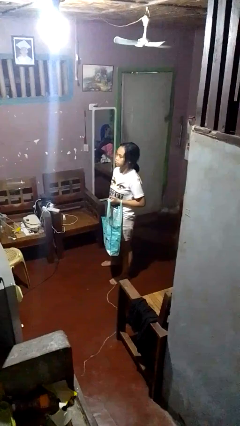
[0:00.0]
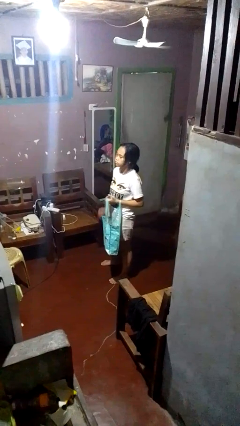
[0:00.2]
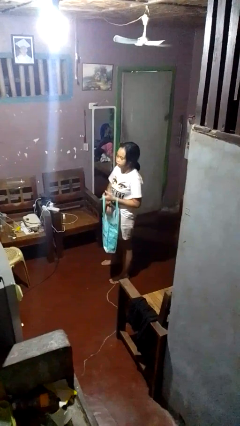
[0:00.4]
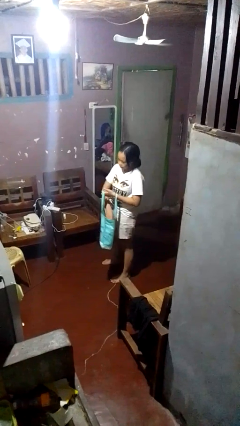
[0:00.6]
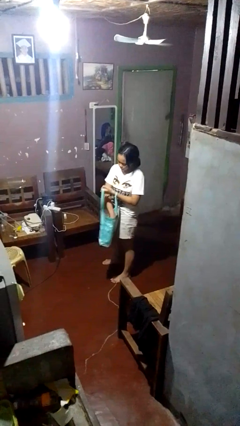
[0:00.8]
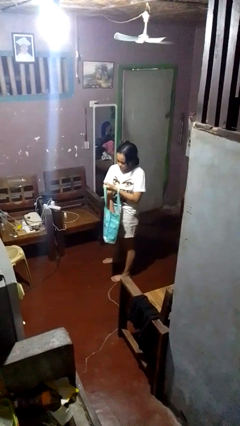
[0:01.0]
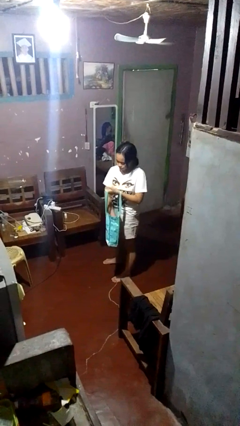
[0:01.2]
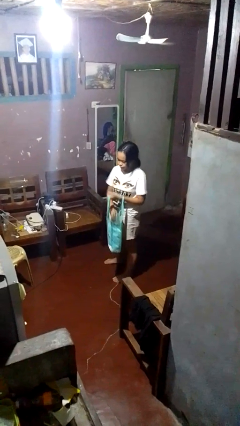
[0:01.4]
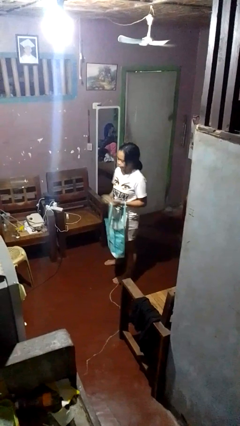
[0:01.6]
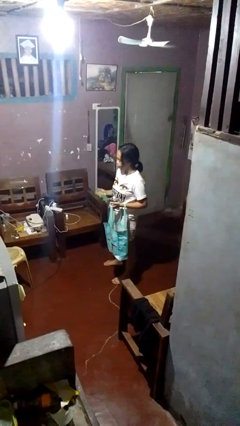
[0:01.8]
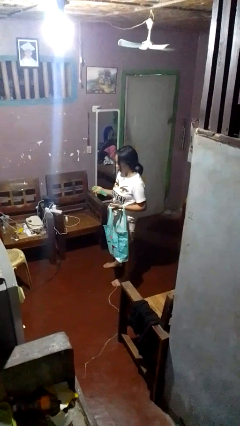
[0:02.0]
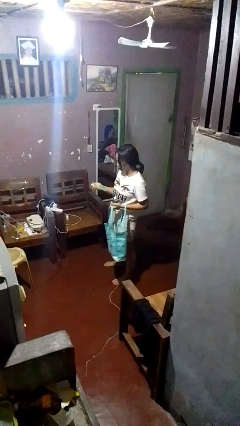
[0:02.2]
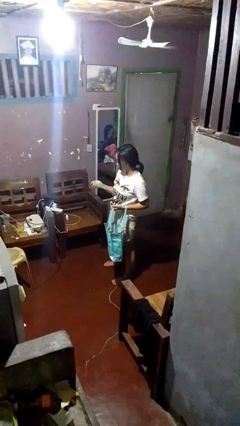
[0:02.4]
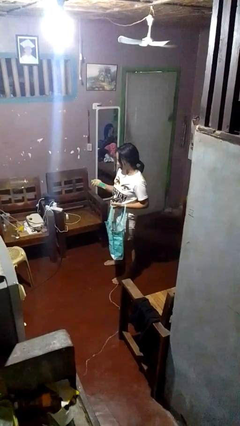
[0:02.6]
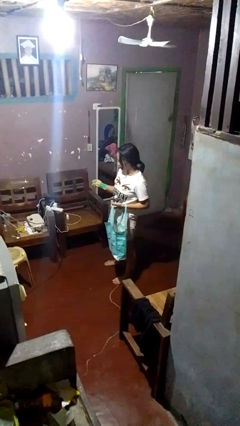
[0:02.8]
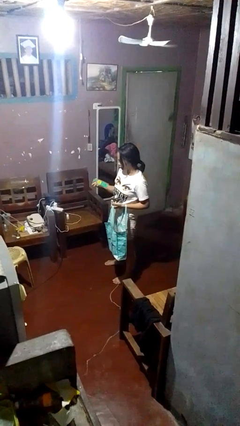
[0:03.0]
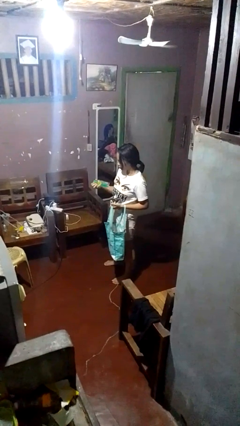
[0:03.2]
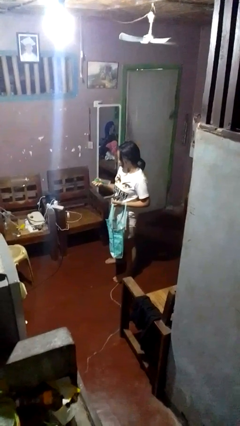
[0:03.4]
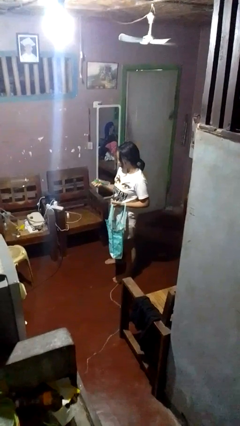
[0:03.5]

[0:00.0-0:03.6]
person takes object from bag

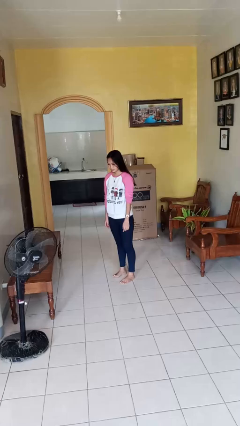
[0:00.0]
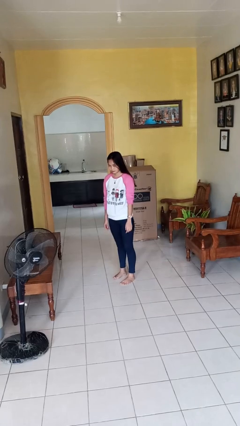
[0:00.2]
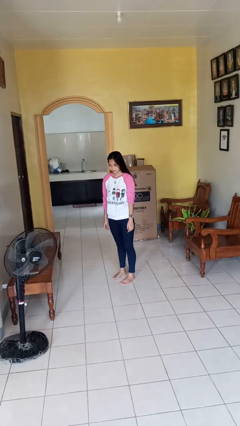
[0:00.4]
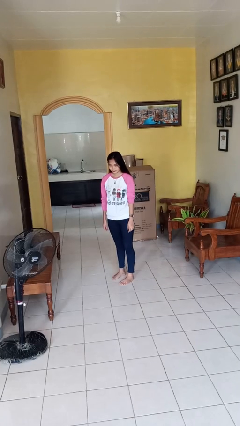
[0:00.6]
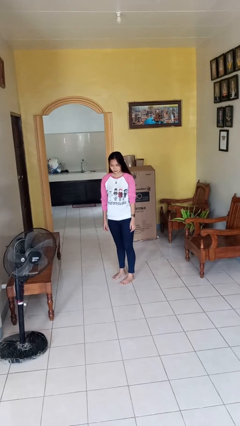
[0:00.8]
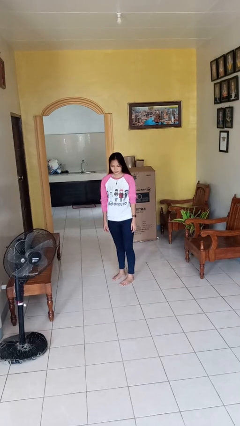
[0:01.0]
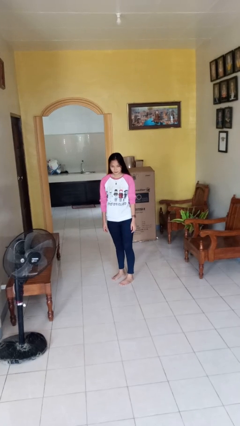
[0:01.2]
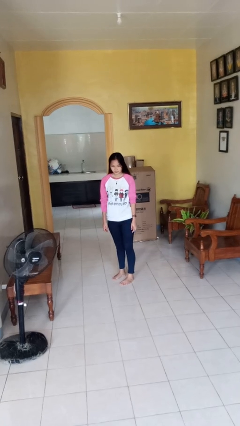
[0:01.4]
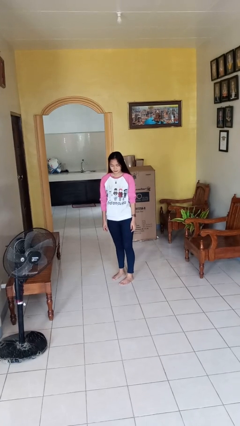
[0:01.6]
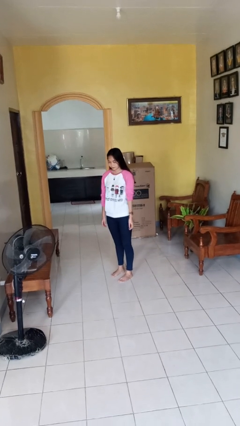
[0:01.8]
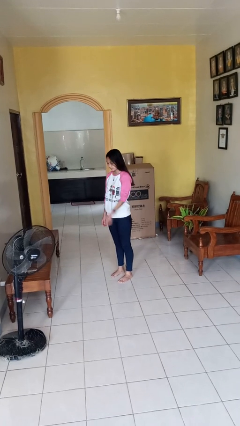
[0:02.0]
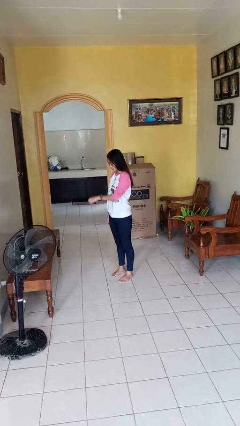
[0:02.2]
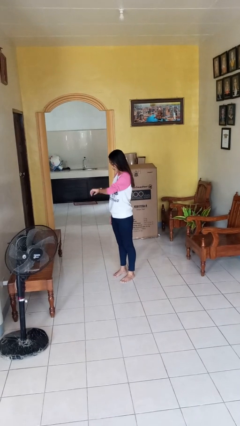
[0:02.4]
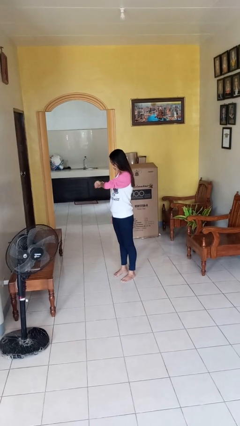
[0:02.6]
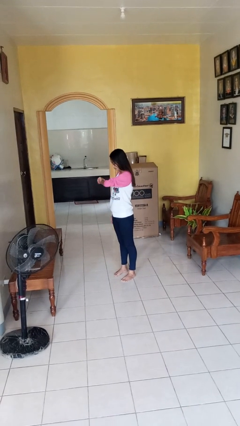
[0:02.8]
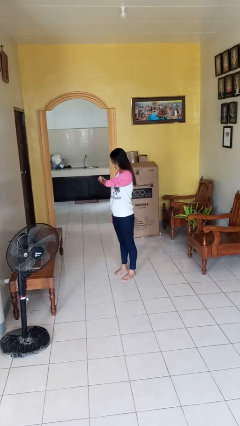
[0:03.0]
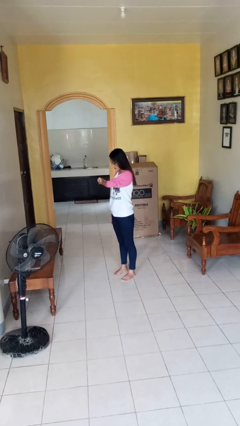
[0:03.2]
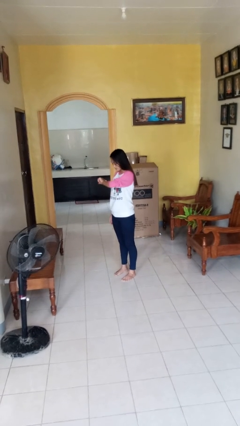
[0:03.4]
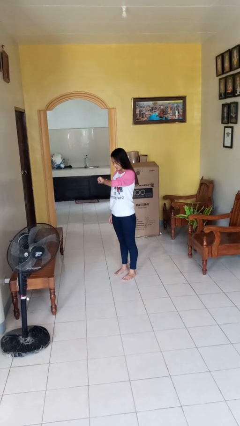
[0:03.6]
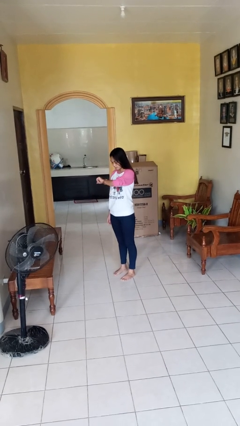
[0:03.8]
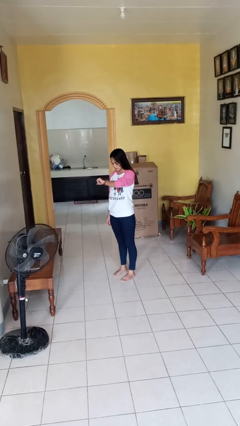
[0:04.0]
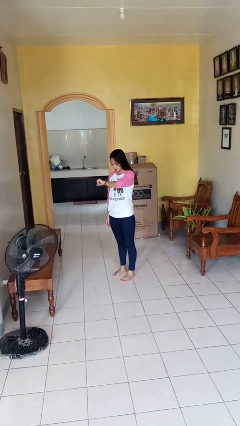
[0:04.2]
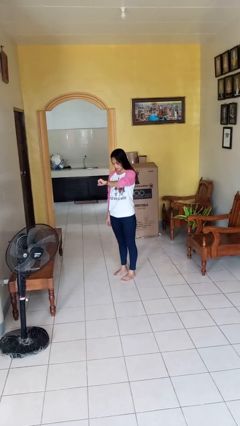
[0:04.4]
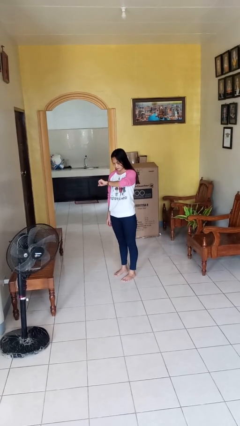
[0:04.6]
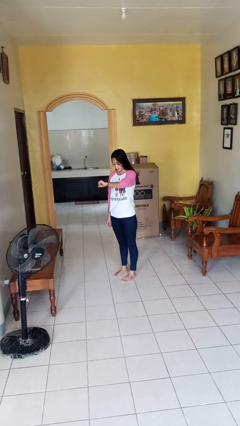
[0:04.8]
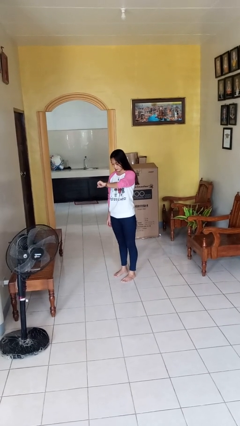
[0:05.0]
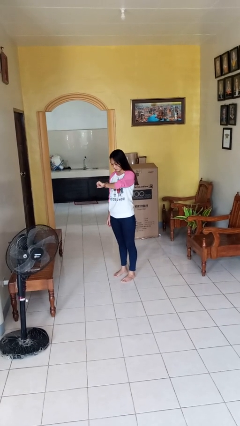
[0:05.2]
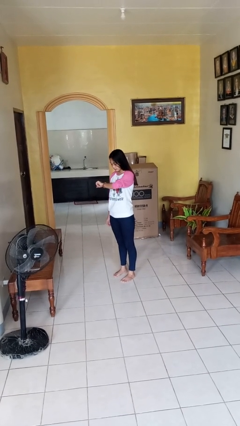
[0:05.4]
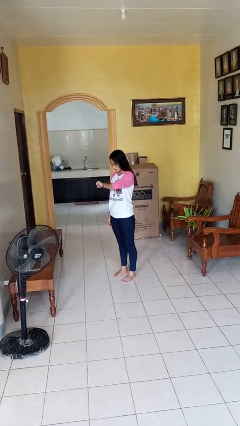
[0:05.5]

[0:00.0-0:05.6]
person looks at wristwatch

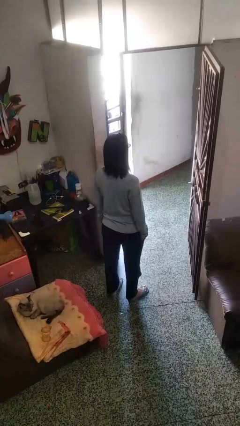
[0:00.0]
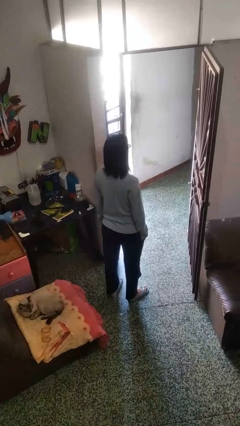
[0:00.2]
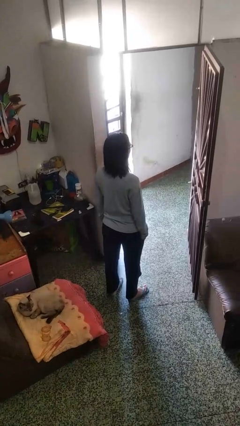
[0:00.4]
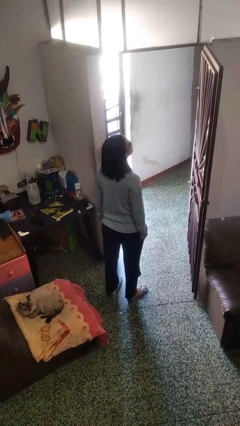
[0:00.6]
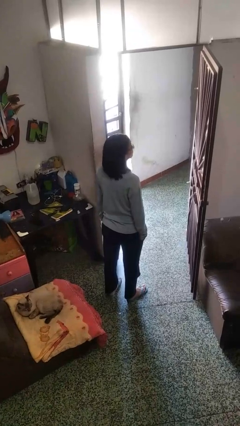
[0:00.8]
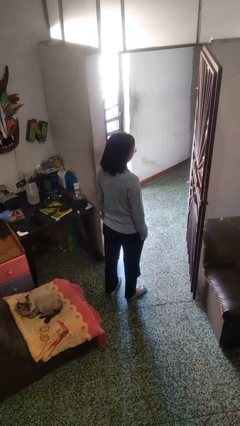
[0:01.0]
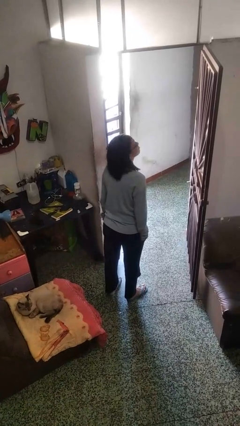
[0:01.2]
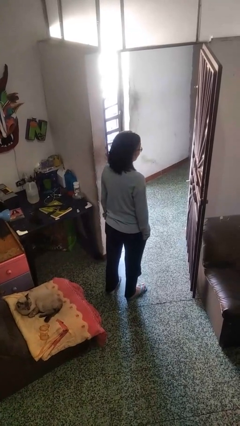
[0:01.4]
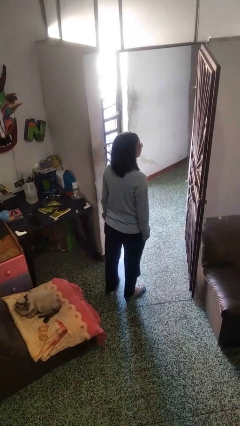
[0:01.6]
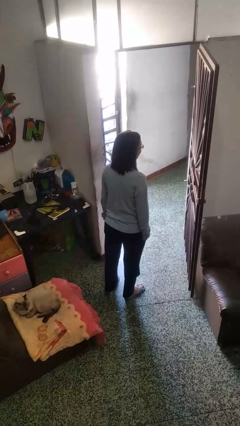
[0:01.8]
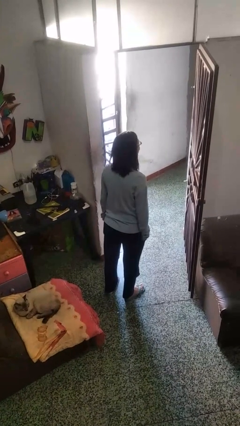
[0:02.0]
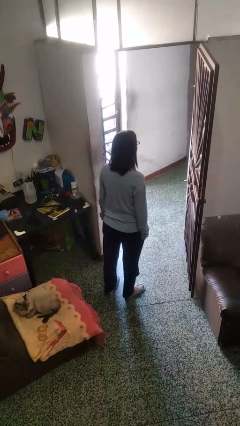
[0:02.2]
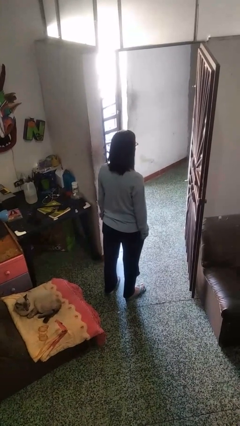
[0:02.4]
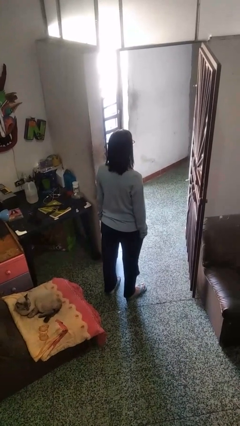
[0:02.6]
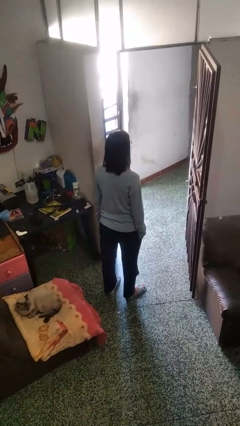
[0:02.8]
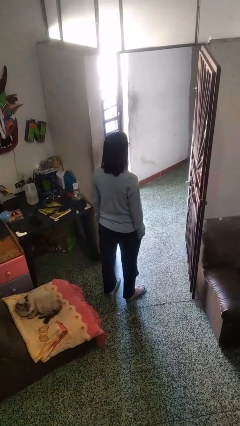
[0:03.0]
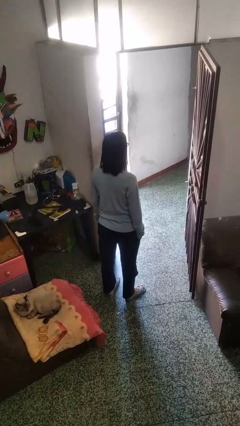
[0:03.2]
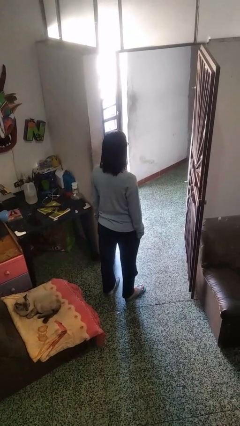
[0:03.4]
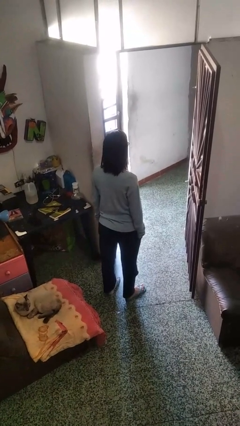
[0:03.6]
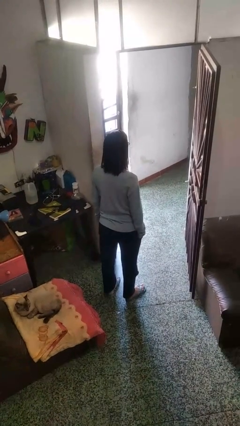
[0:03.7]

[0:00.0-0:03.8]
person nods head

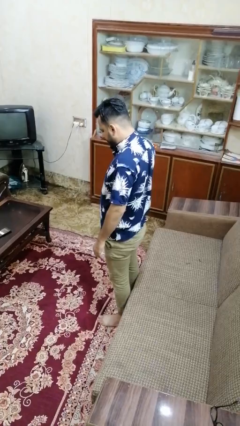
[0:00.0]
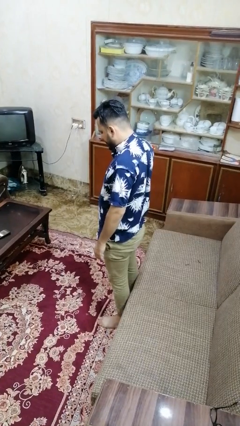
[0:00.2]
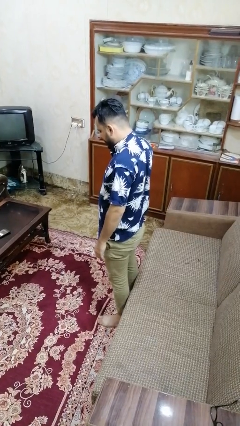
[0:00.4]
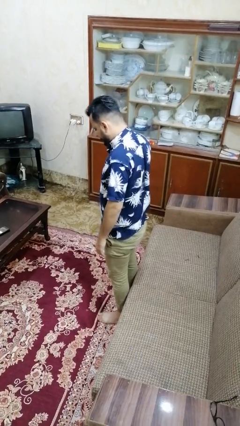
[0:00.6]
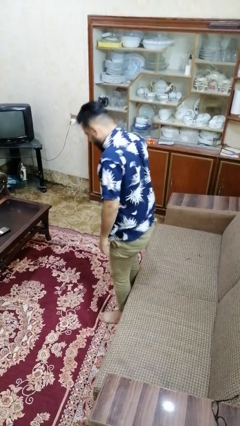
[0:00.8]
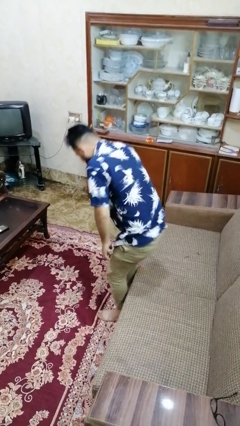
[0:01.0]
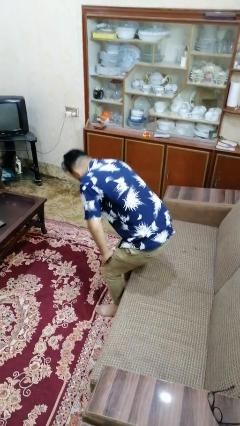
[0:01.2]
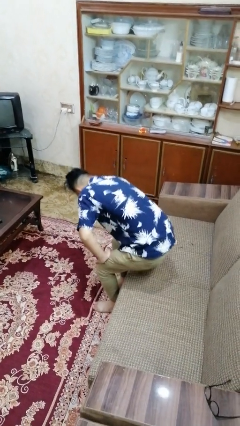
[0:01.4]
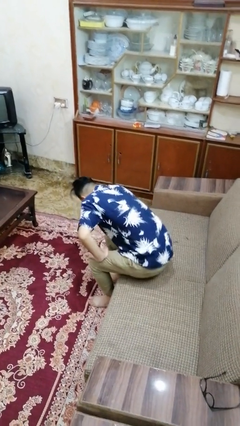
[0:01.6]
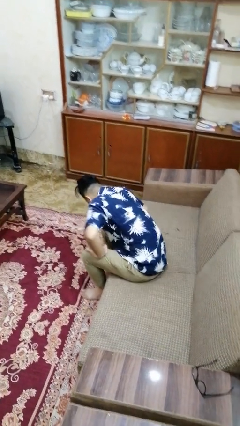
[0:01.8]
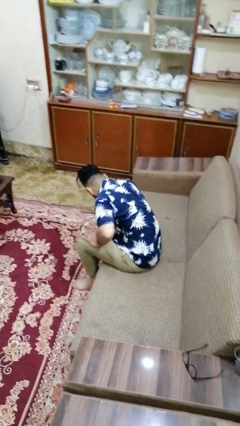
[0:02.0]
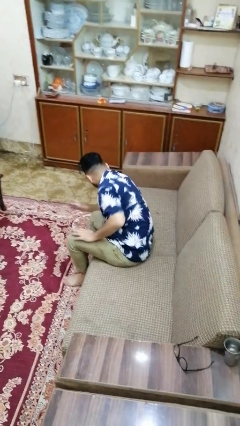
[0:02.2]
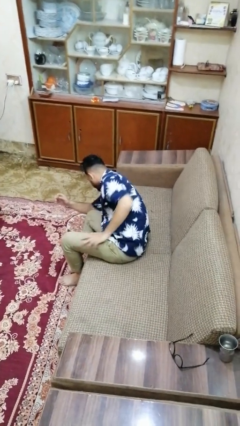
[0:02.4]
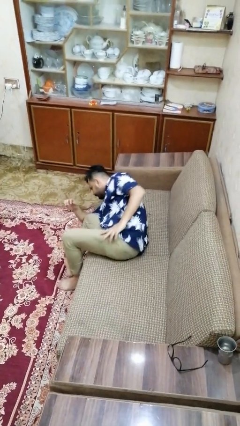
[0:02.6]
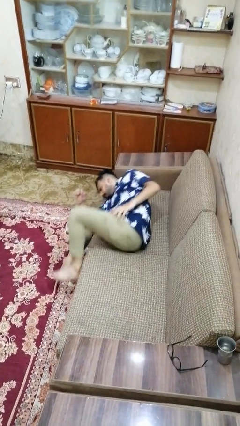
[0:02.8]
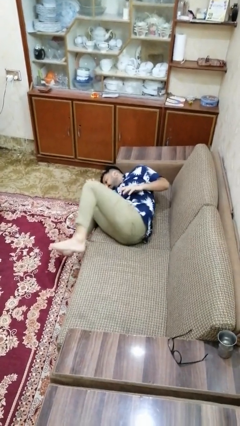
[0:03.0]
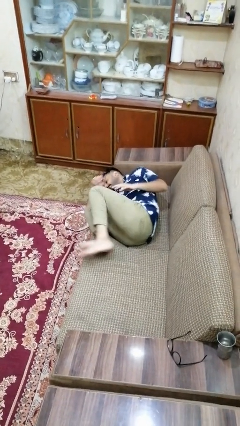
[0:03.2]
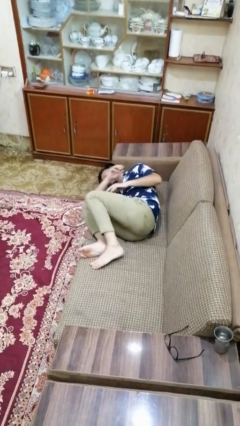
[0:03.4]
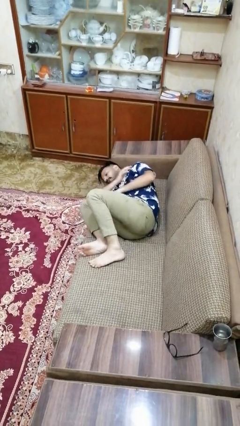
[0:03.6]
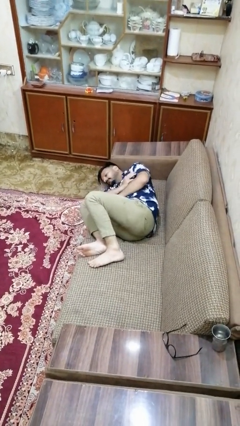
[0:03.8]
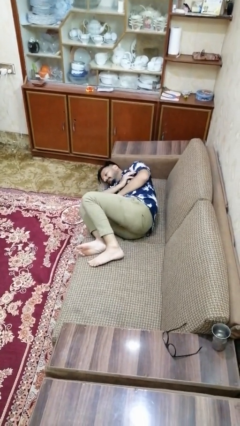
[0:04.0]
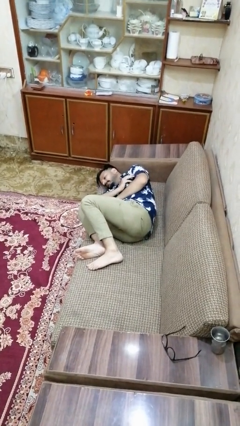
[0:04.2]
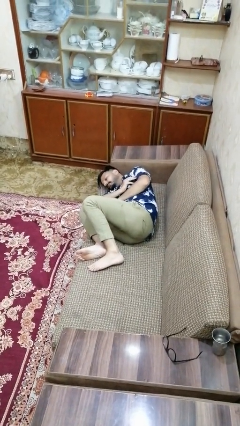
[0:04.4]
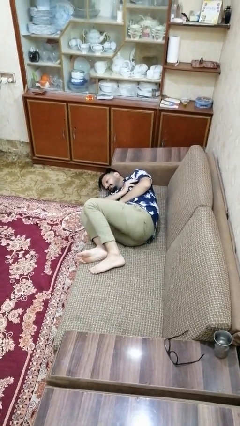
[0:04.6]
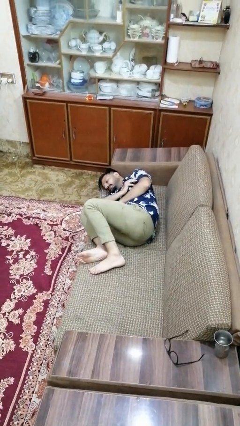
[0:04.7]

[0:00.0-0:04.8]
person lies down on couch
